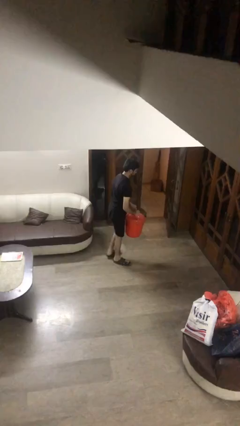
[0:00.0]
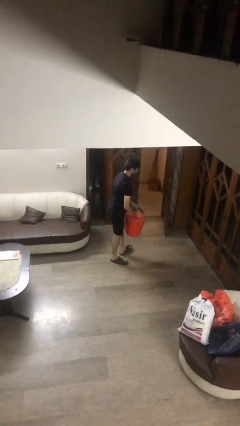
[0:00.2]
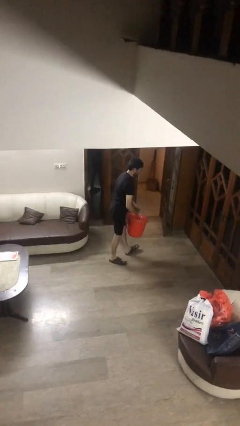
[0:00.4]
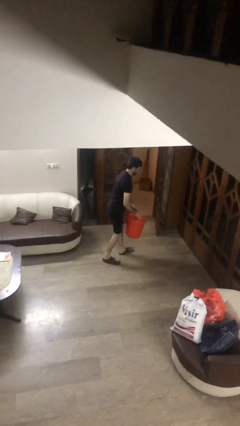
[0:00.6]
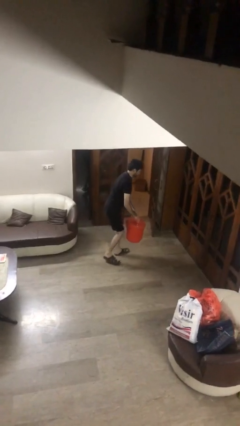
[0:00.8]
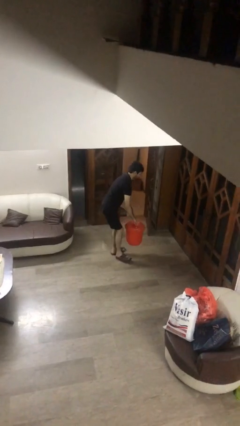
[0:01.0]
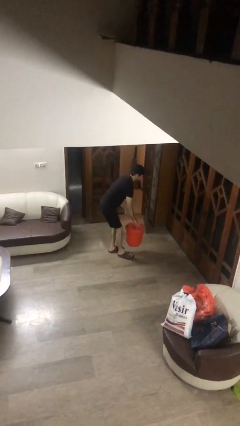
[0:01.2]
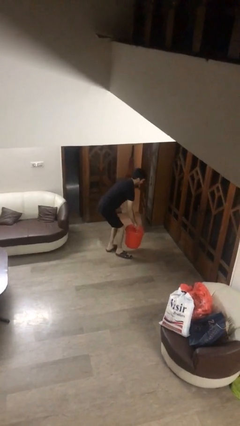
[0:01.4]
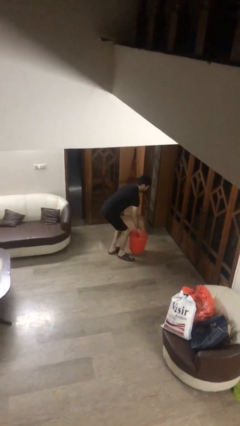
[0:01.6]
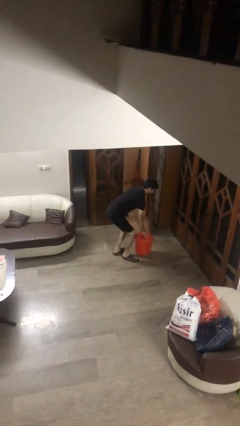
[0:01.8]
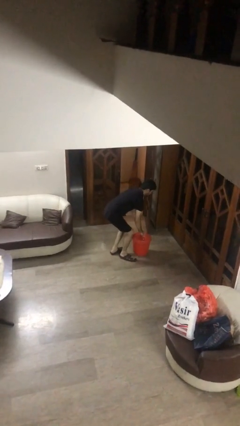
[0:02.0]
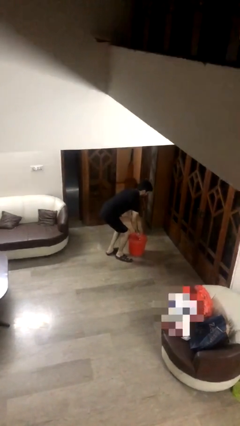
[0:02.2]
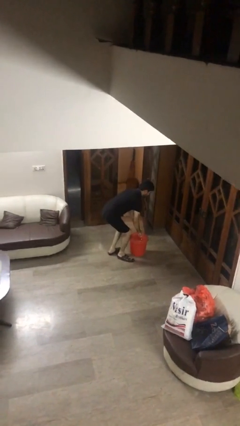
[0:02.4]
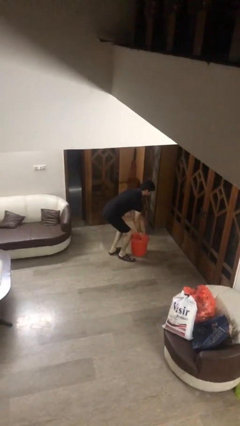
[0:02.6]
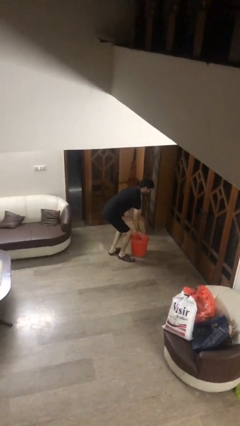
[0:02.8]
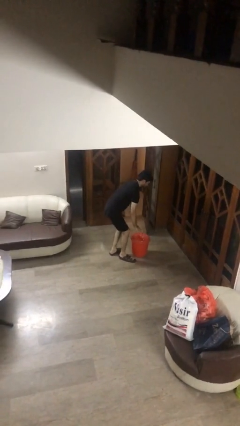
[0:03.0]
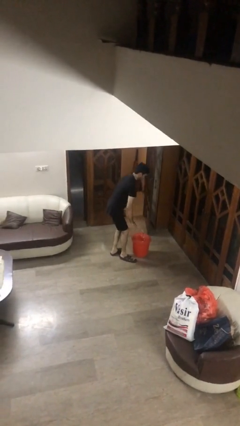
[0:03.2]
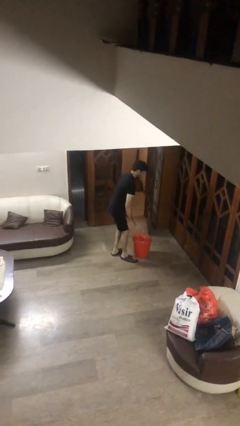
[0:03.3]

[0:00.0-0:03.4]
person puts down object on floor

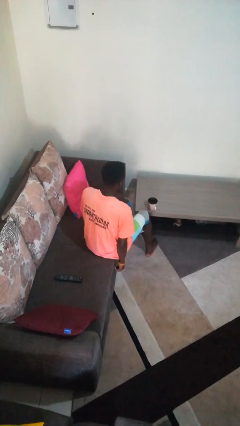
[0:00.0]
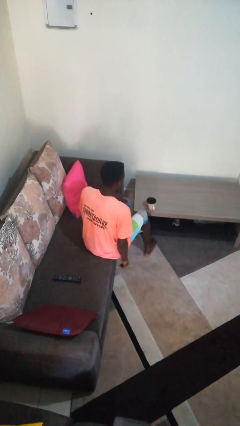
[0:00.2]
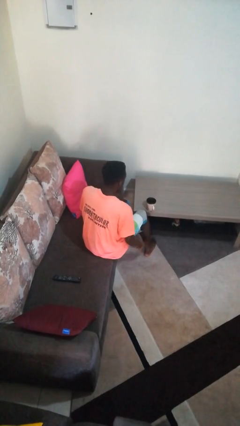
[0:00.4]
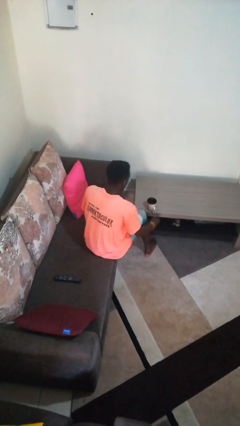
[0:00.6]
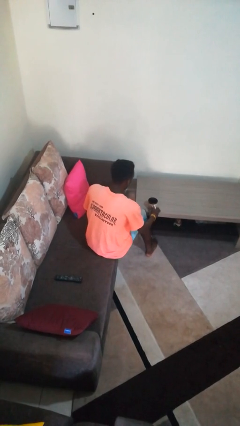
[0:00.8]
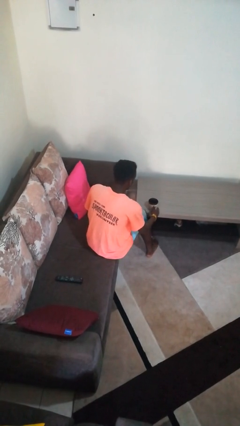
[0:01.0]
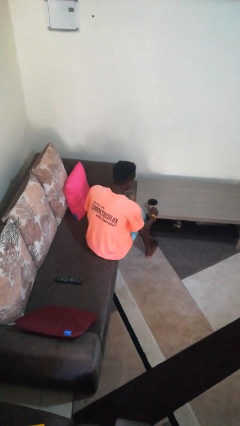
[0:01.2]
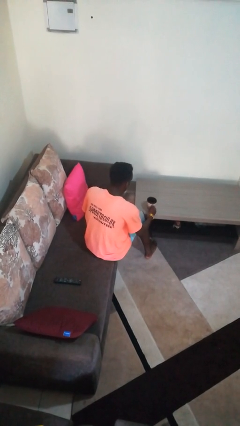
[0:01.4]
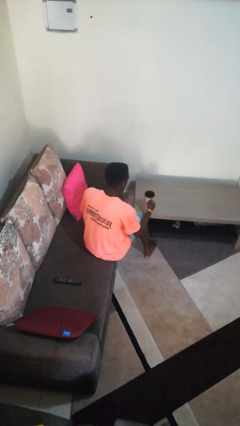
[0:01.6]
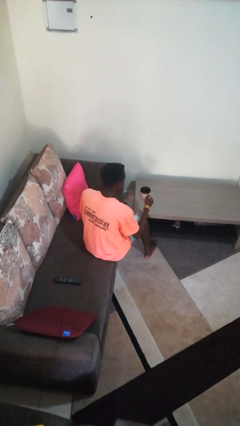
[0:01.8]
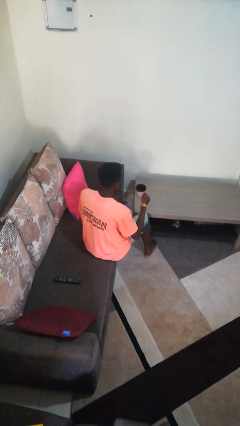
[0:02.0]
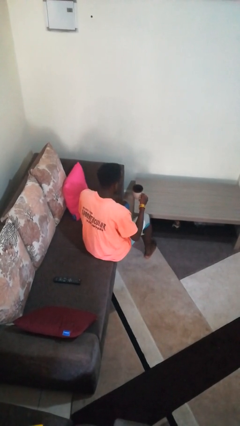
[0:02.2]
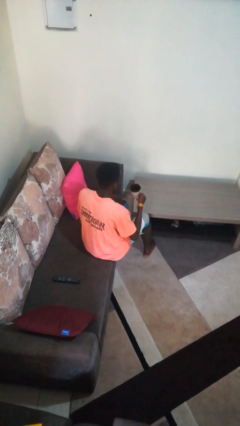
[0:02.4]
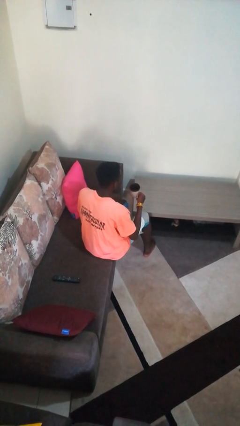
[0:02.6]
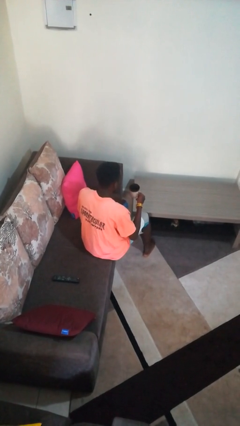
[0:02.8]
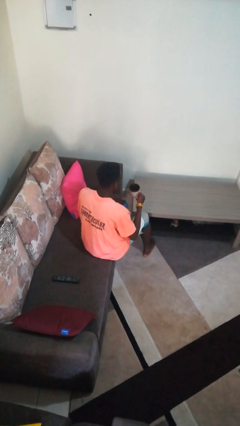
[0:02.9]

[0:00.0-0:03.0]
person picks up object from table

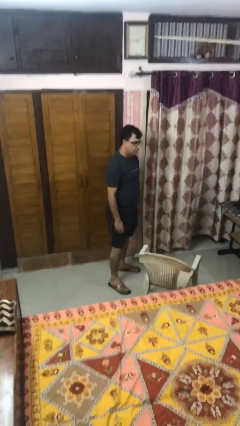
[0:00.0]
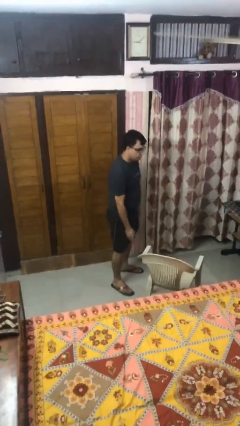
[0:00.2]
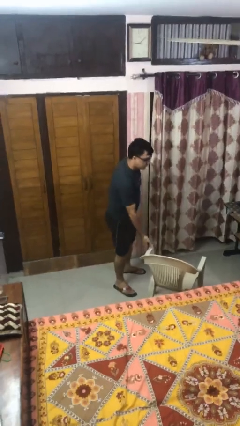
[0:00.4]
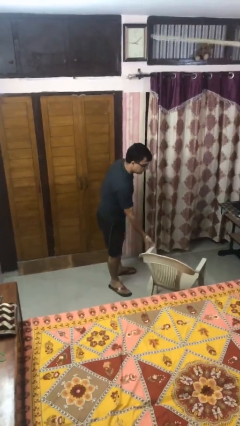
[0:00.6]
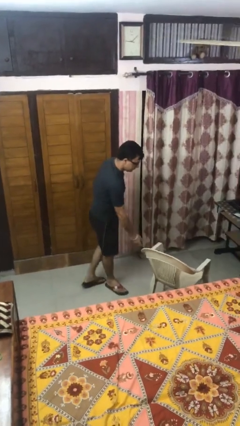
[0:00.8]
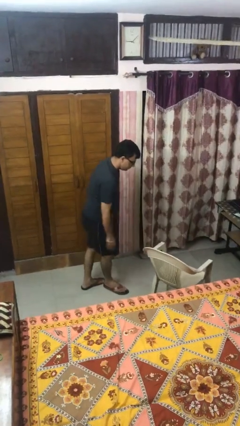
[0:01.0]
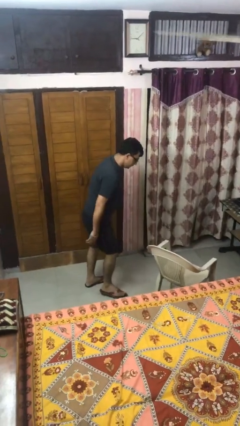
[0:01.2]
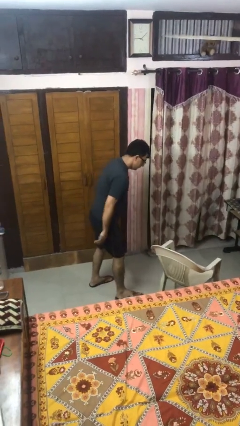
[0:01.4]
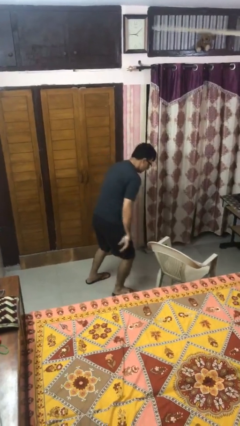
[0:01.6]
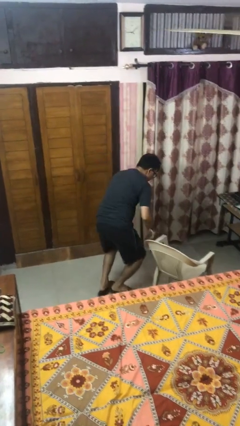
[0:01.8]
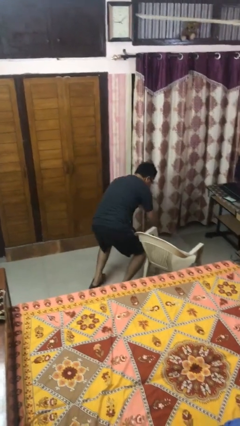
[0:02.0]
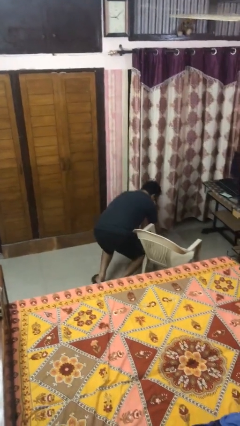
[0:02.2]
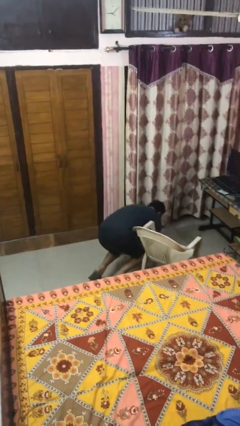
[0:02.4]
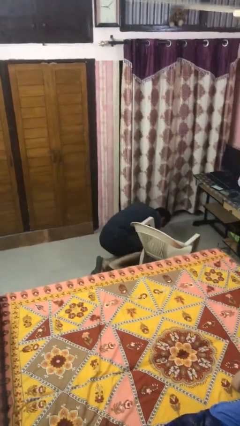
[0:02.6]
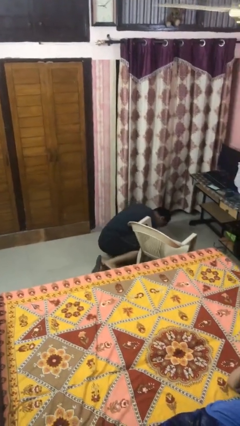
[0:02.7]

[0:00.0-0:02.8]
person trips on object on floor

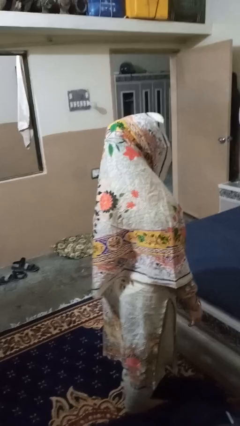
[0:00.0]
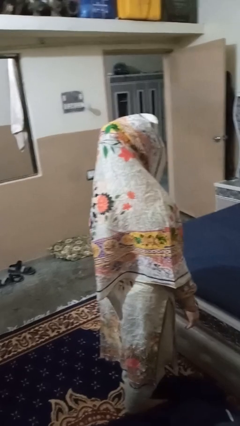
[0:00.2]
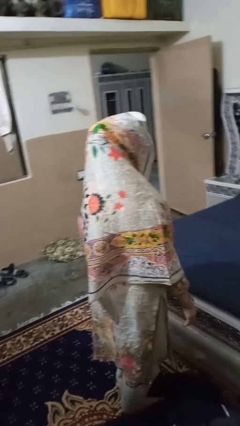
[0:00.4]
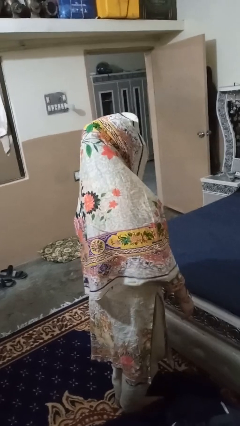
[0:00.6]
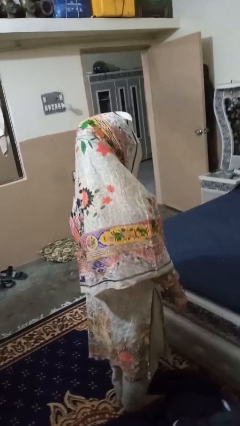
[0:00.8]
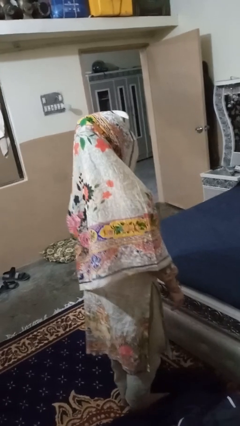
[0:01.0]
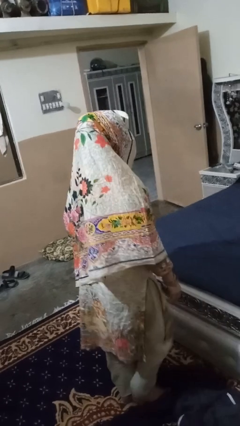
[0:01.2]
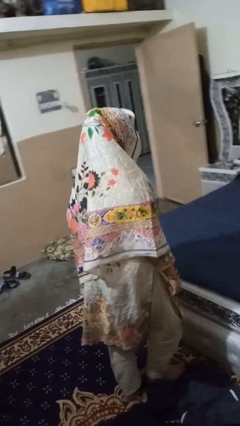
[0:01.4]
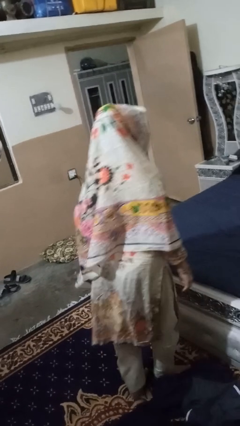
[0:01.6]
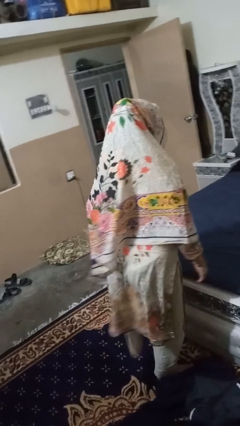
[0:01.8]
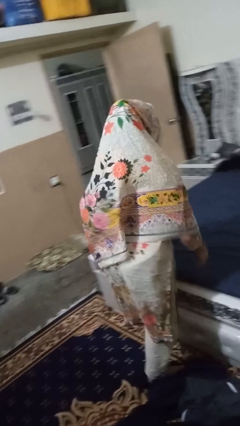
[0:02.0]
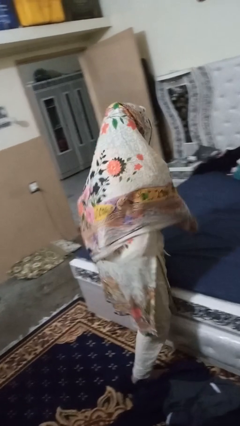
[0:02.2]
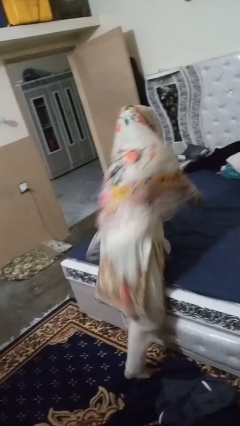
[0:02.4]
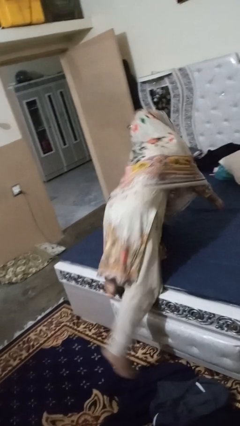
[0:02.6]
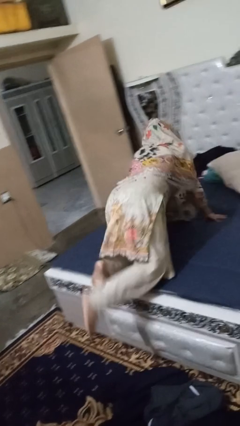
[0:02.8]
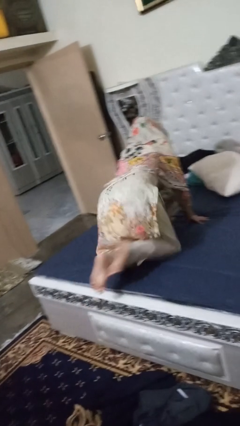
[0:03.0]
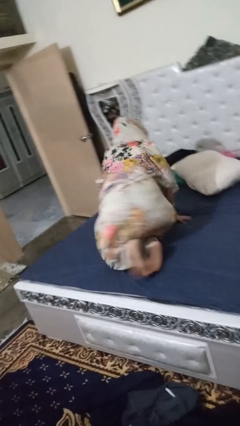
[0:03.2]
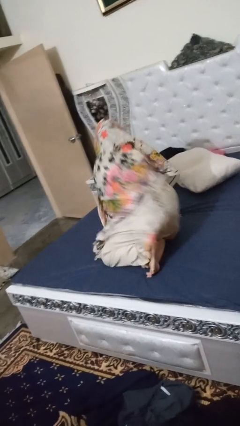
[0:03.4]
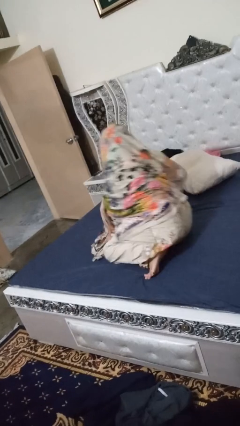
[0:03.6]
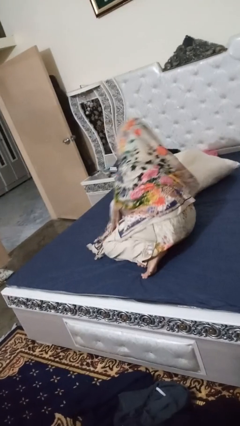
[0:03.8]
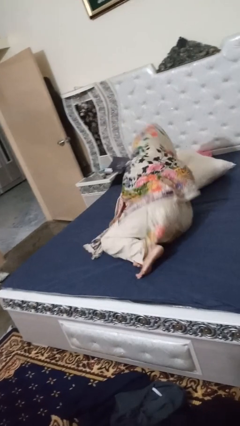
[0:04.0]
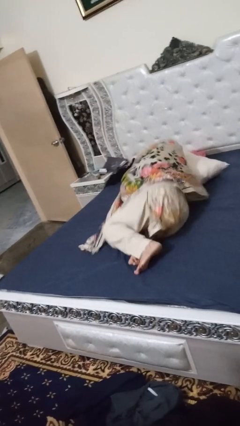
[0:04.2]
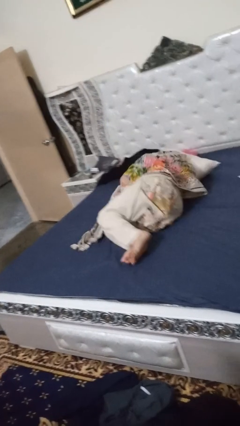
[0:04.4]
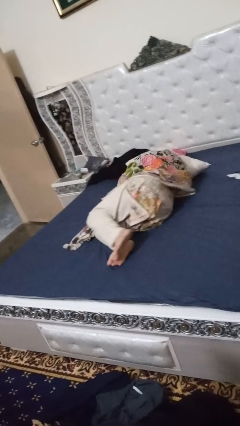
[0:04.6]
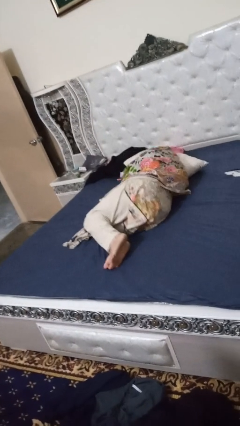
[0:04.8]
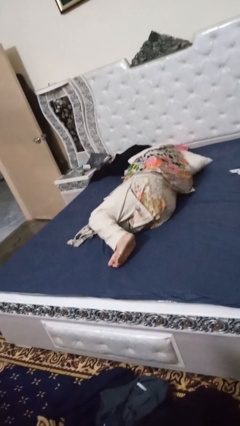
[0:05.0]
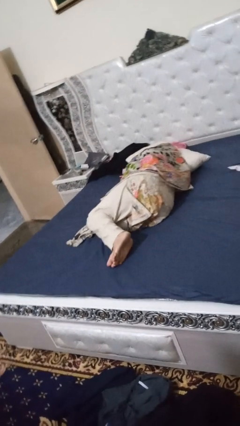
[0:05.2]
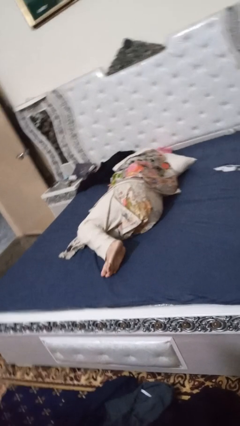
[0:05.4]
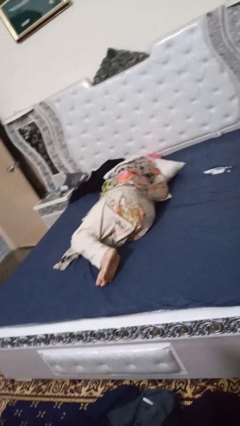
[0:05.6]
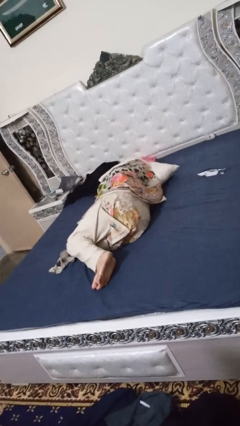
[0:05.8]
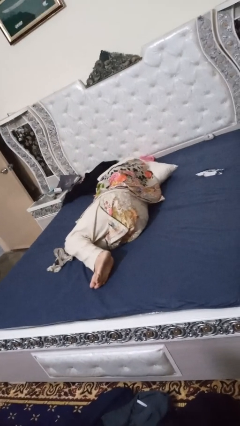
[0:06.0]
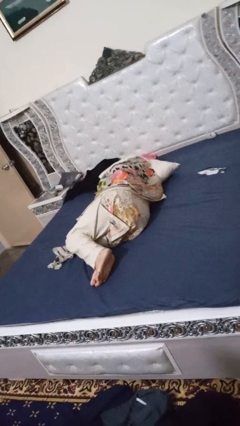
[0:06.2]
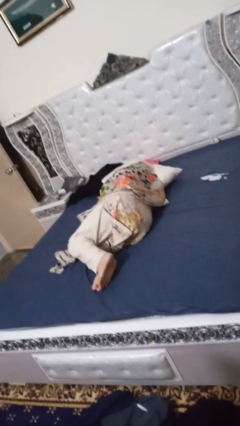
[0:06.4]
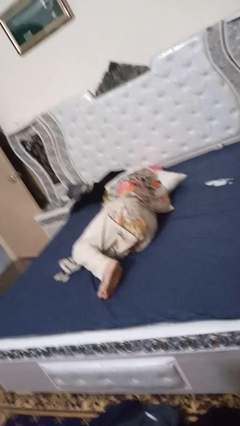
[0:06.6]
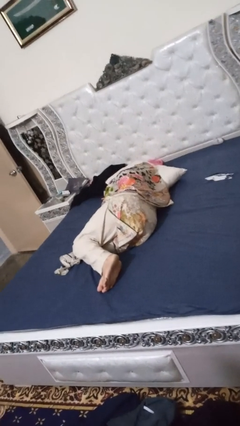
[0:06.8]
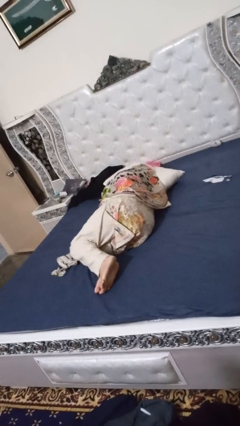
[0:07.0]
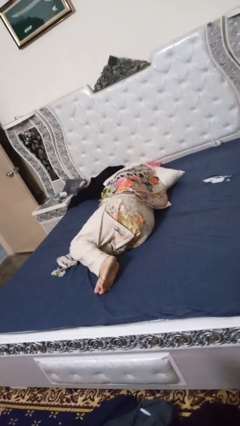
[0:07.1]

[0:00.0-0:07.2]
person lies down on bed

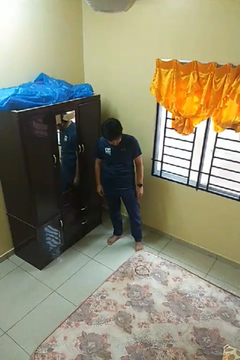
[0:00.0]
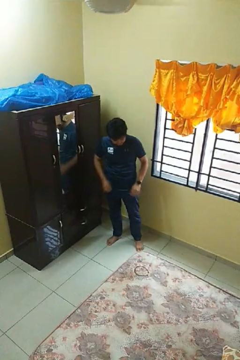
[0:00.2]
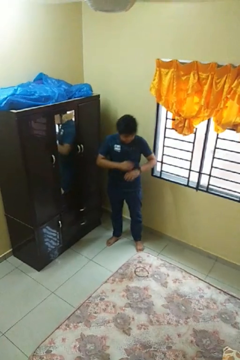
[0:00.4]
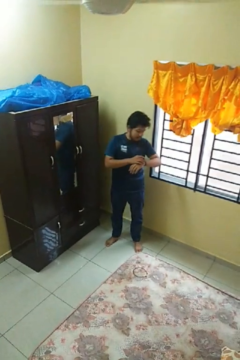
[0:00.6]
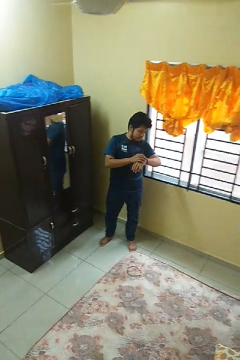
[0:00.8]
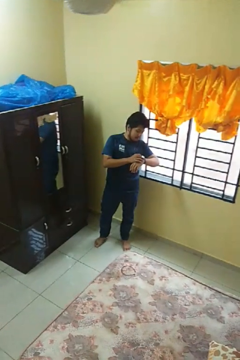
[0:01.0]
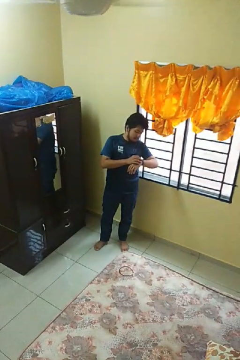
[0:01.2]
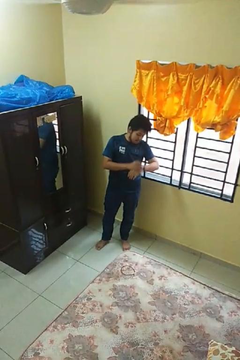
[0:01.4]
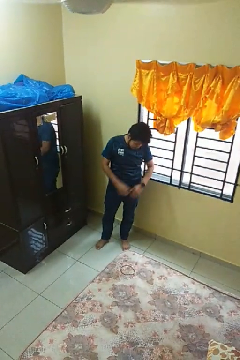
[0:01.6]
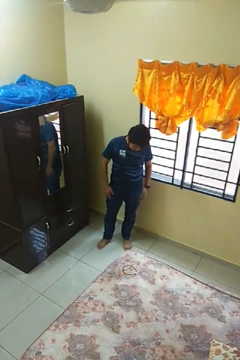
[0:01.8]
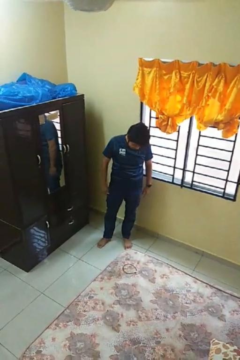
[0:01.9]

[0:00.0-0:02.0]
person looks at wristwatch
